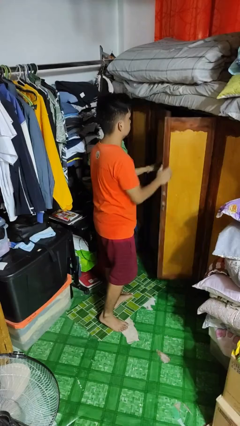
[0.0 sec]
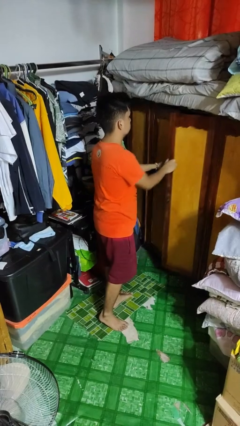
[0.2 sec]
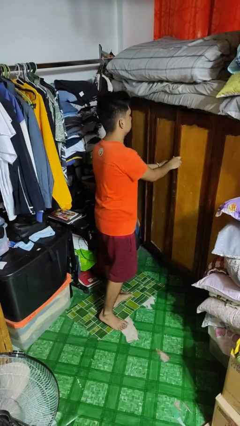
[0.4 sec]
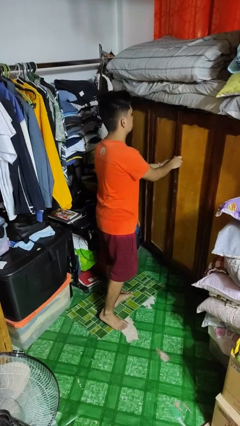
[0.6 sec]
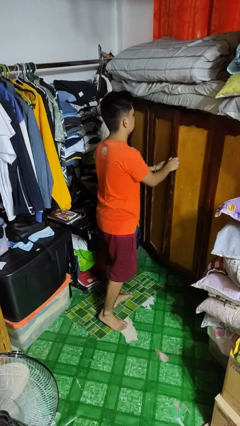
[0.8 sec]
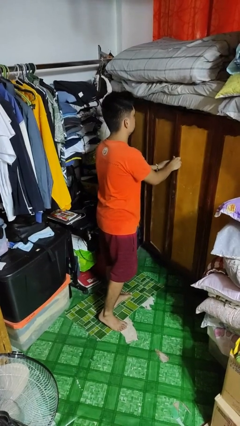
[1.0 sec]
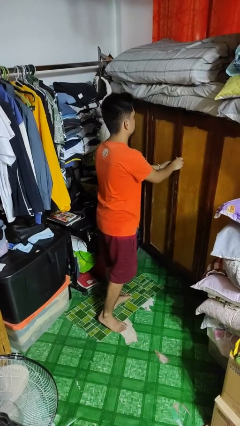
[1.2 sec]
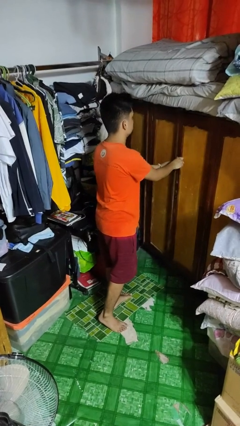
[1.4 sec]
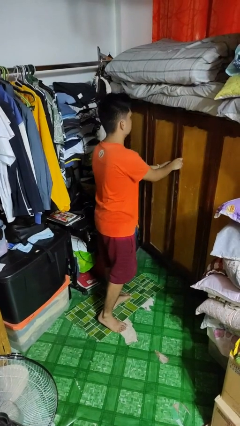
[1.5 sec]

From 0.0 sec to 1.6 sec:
person closes closet door

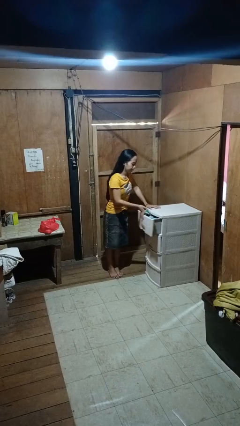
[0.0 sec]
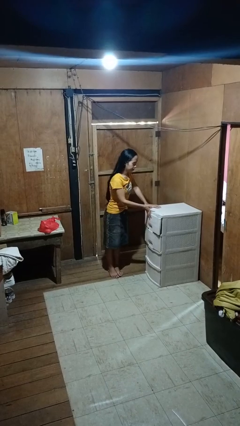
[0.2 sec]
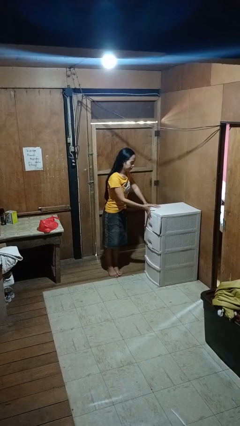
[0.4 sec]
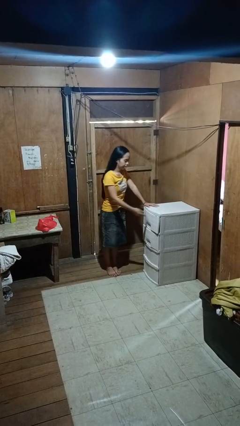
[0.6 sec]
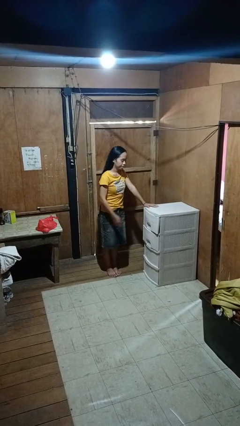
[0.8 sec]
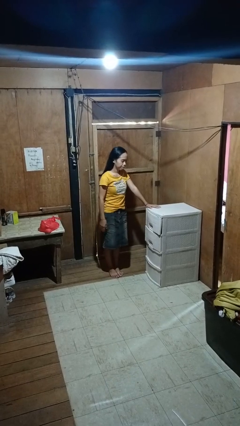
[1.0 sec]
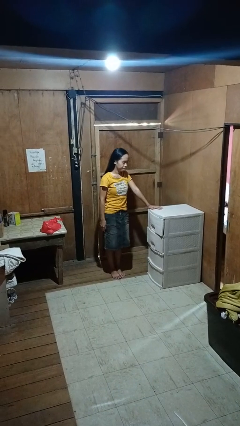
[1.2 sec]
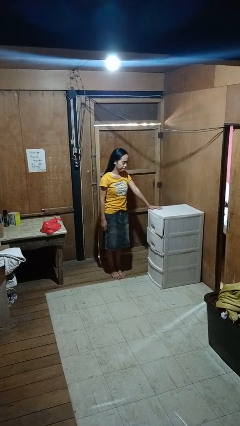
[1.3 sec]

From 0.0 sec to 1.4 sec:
person closes dresser drawer

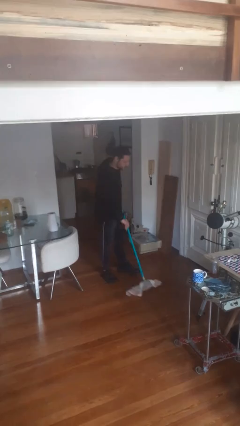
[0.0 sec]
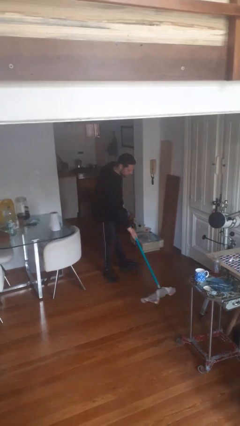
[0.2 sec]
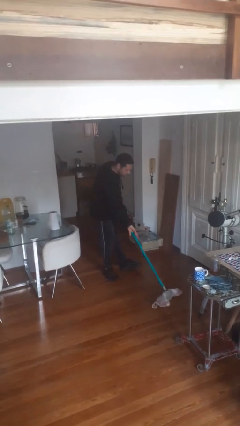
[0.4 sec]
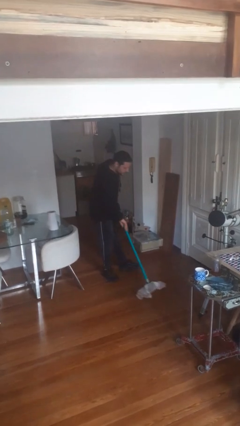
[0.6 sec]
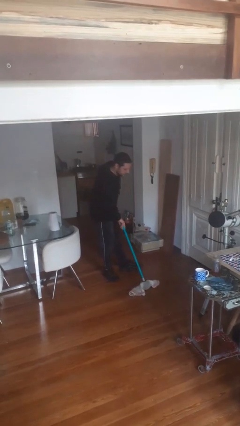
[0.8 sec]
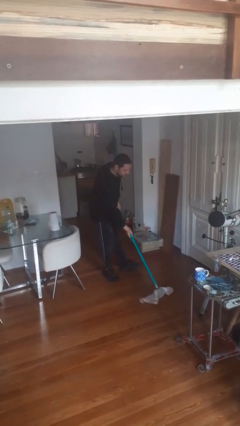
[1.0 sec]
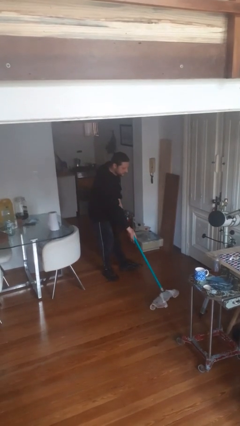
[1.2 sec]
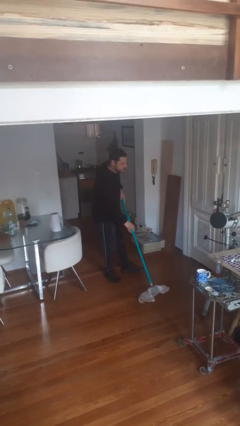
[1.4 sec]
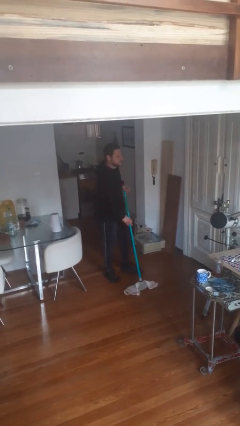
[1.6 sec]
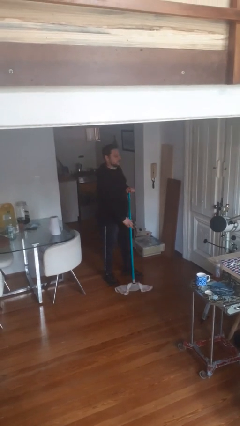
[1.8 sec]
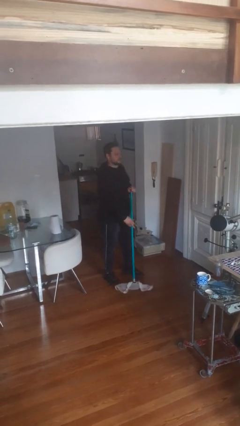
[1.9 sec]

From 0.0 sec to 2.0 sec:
person mops

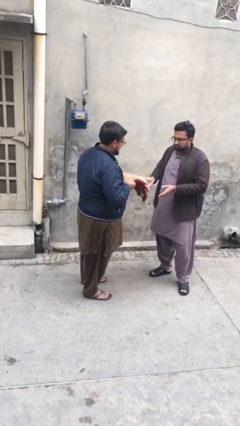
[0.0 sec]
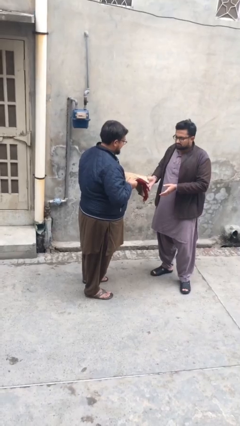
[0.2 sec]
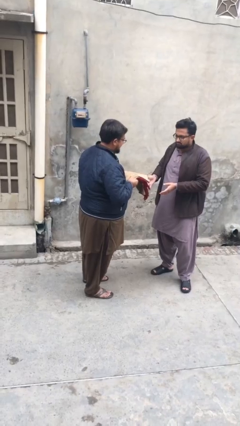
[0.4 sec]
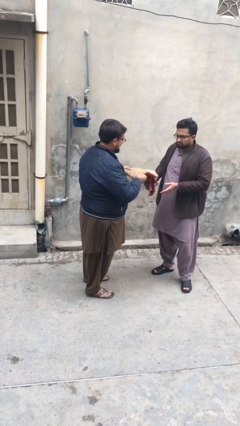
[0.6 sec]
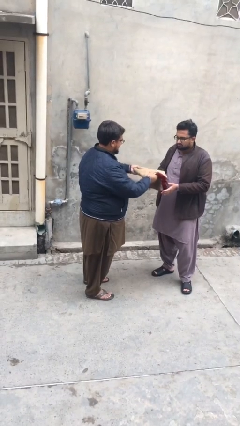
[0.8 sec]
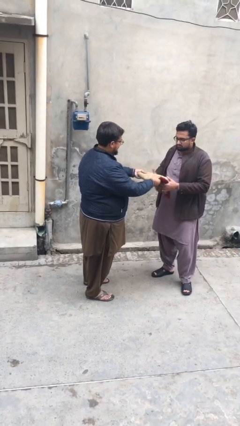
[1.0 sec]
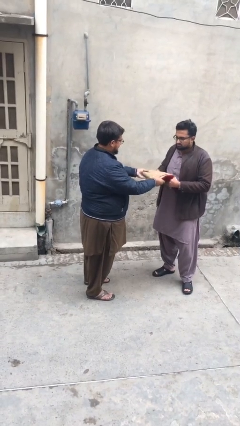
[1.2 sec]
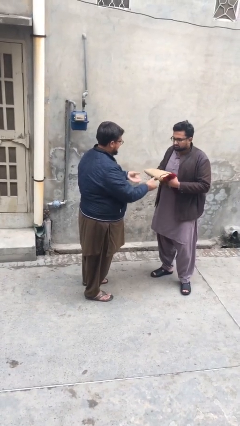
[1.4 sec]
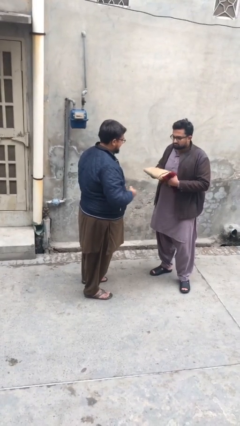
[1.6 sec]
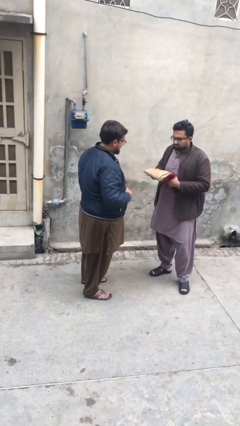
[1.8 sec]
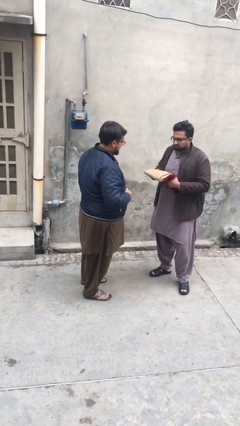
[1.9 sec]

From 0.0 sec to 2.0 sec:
person transfers object to person

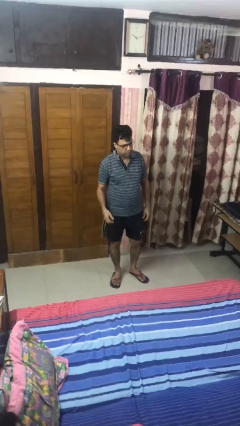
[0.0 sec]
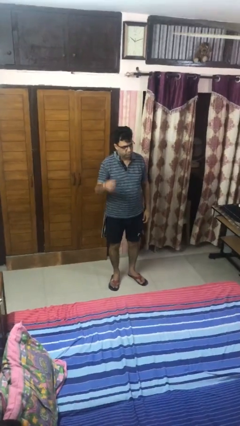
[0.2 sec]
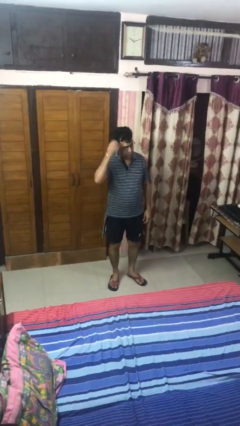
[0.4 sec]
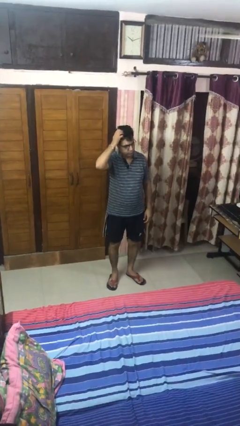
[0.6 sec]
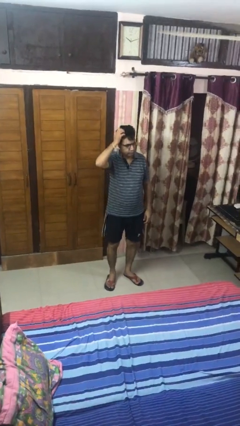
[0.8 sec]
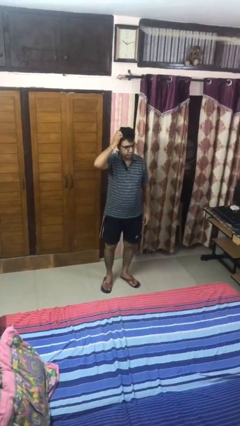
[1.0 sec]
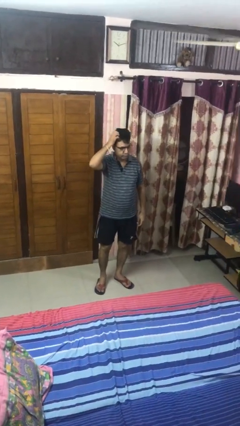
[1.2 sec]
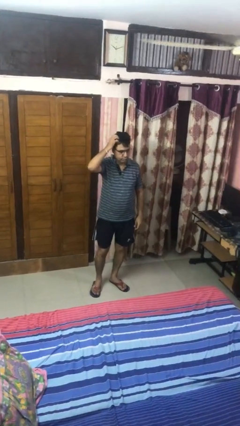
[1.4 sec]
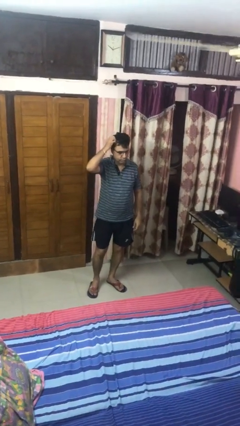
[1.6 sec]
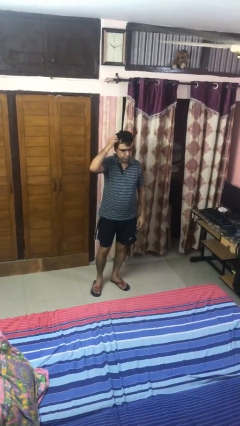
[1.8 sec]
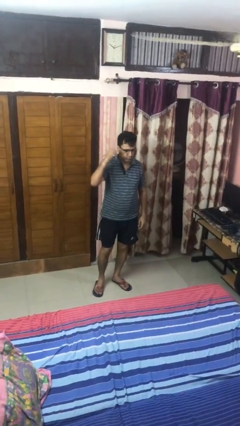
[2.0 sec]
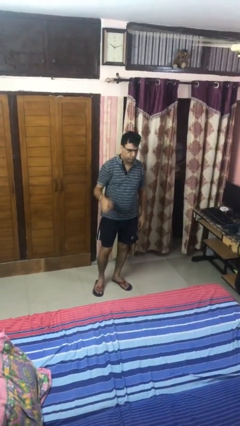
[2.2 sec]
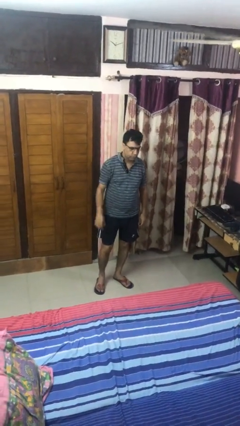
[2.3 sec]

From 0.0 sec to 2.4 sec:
person scratches face

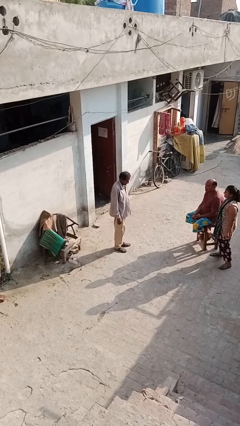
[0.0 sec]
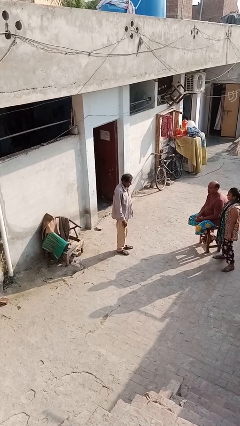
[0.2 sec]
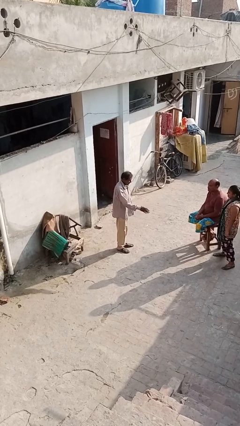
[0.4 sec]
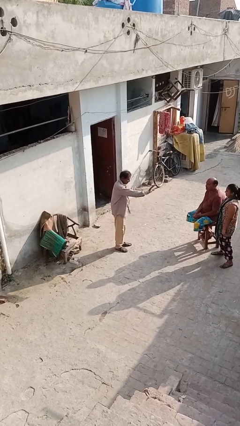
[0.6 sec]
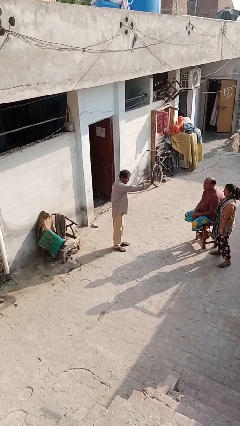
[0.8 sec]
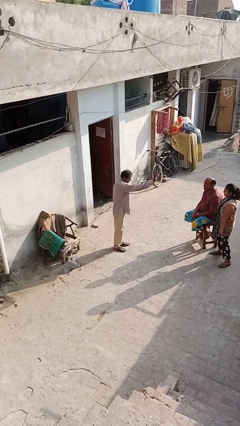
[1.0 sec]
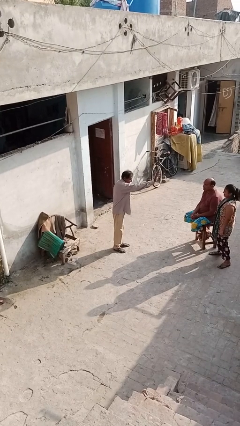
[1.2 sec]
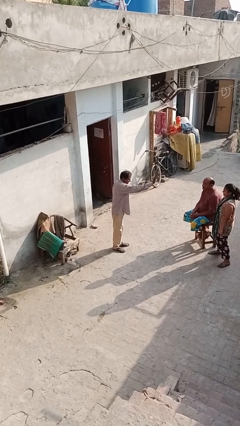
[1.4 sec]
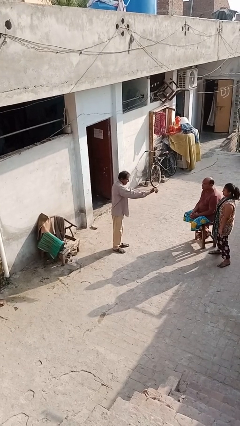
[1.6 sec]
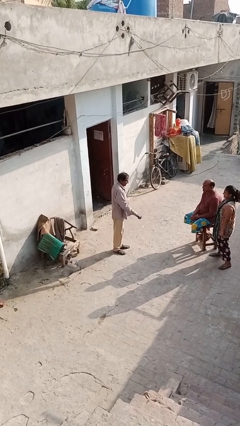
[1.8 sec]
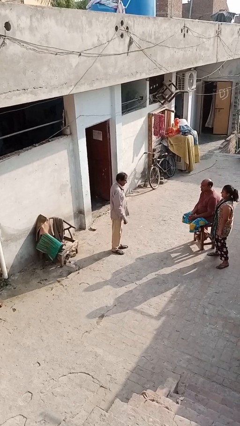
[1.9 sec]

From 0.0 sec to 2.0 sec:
person waves at person

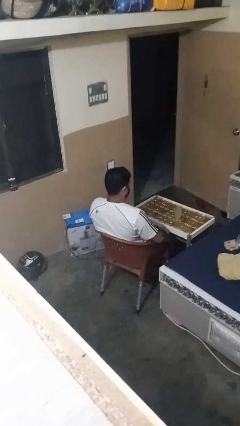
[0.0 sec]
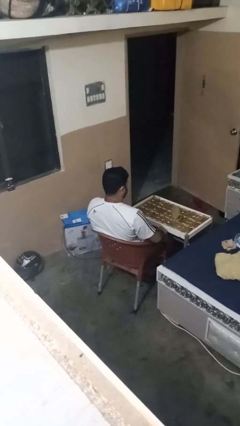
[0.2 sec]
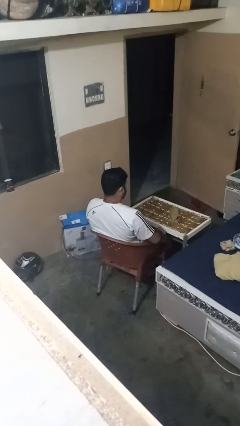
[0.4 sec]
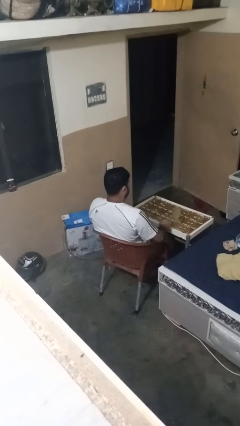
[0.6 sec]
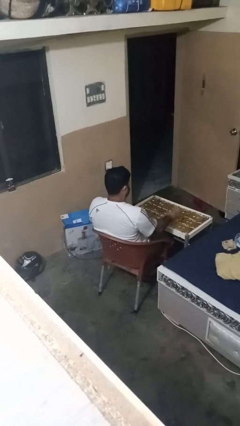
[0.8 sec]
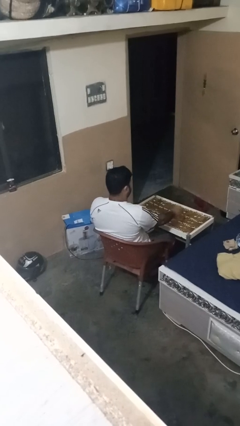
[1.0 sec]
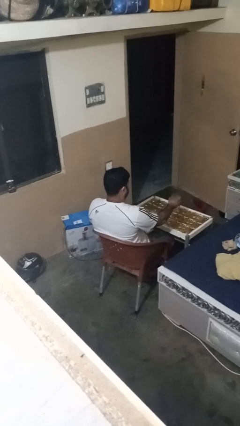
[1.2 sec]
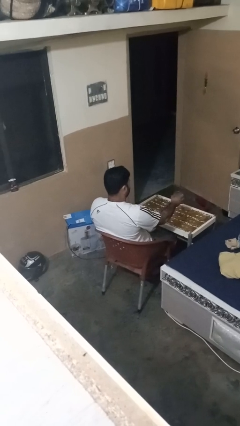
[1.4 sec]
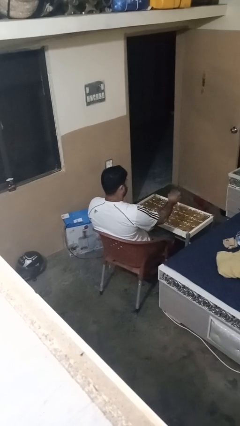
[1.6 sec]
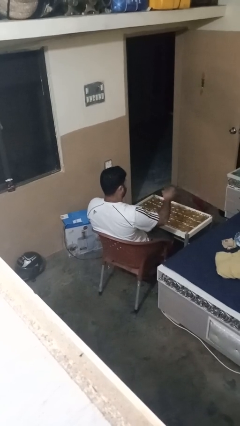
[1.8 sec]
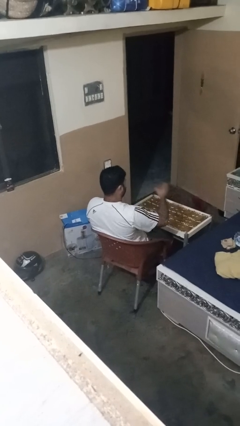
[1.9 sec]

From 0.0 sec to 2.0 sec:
person picks up object from table

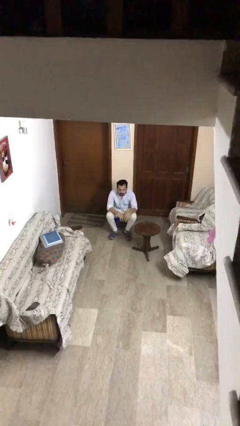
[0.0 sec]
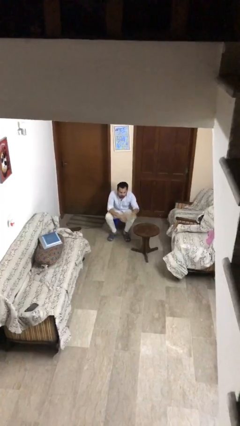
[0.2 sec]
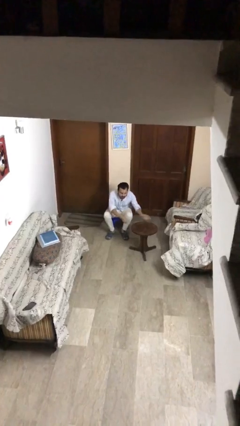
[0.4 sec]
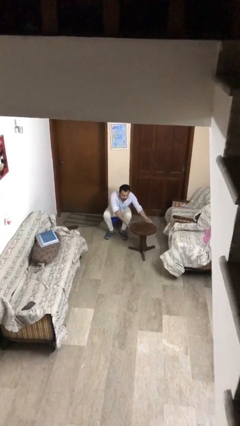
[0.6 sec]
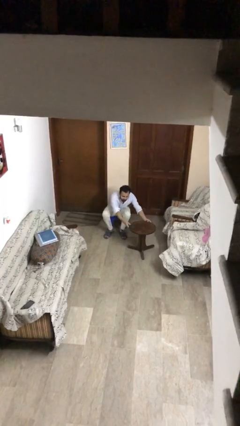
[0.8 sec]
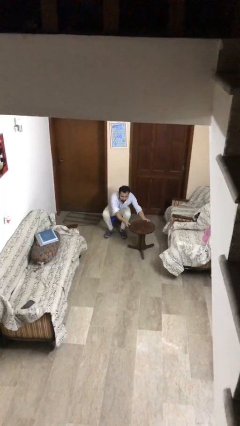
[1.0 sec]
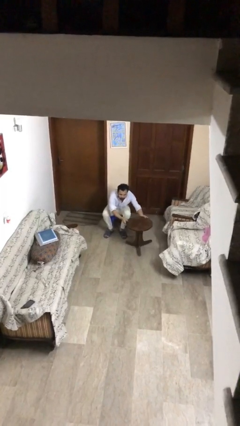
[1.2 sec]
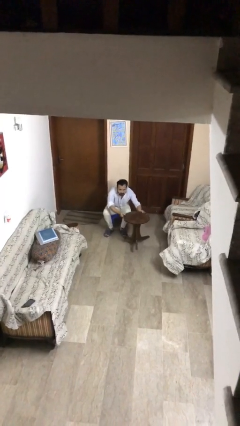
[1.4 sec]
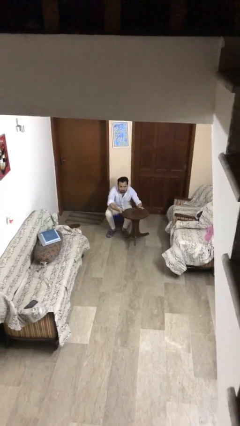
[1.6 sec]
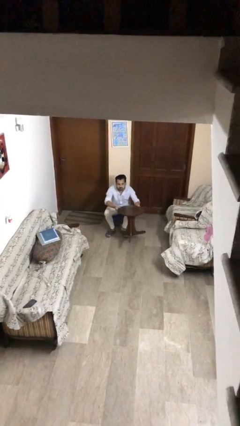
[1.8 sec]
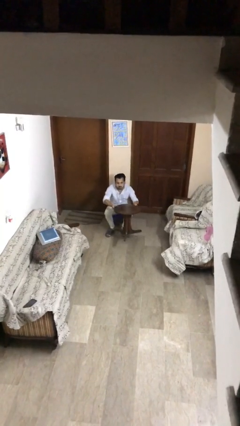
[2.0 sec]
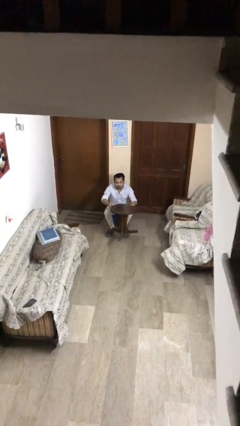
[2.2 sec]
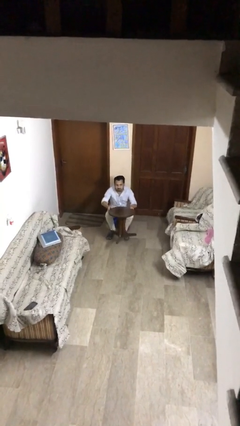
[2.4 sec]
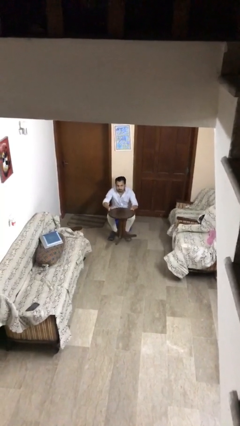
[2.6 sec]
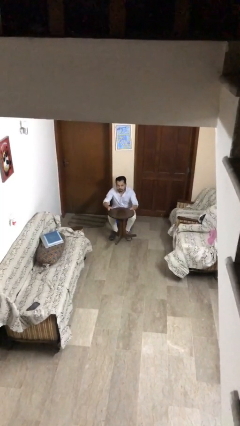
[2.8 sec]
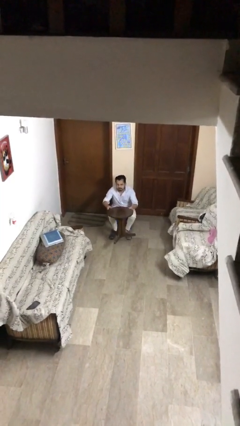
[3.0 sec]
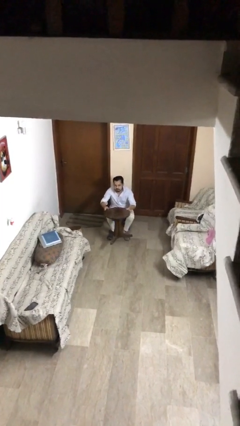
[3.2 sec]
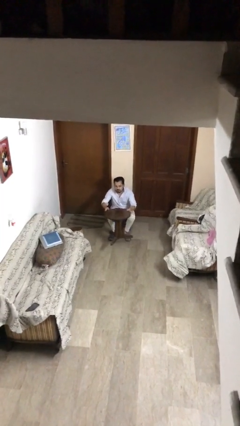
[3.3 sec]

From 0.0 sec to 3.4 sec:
person picks up object from floor
